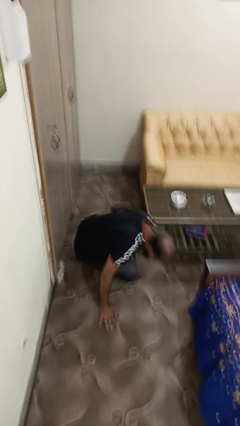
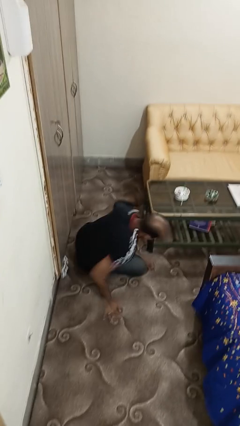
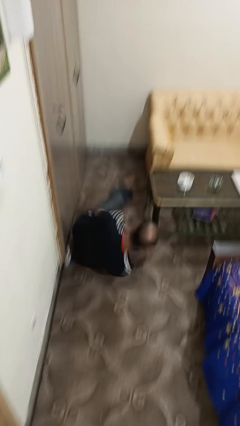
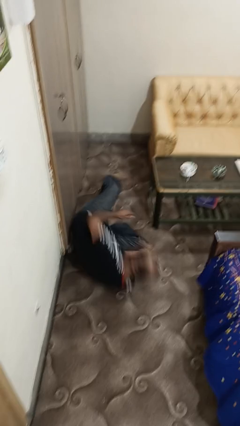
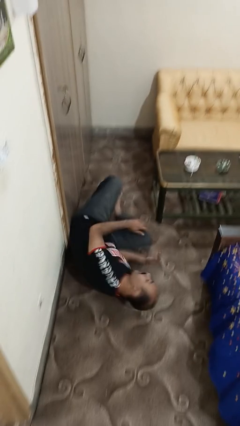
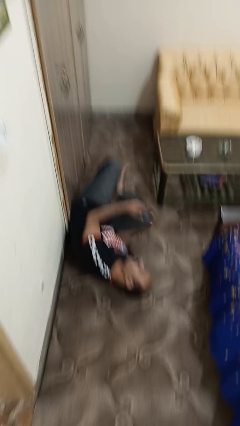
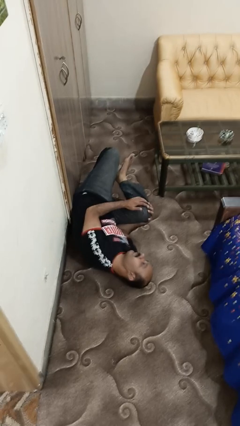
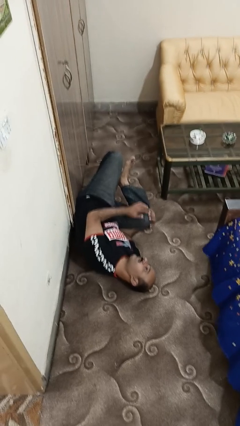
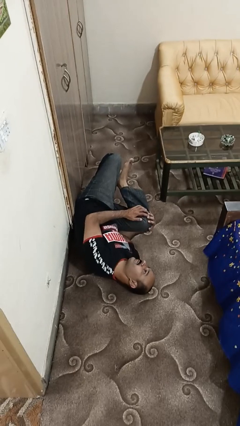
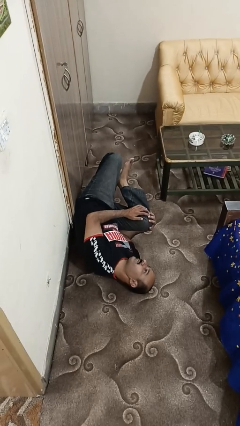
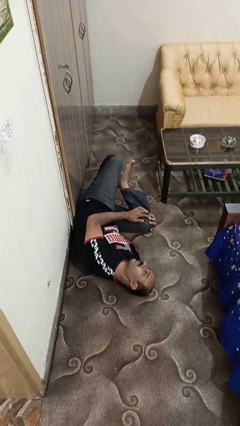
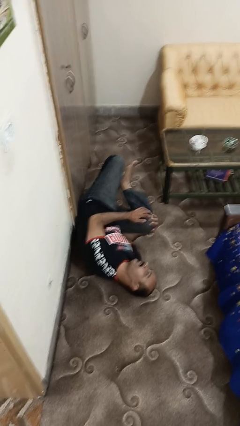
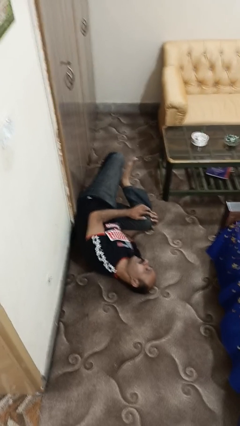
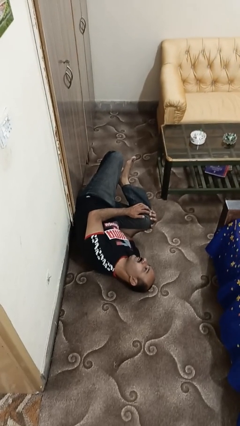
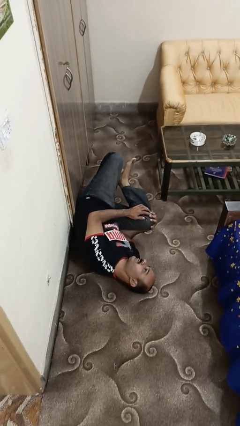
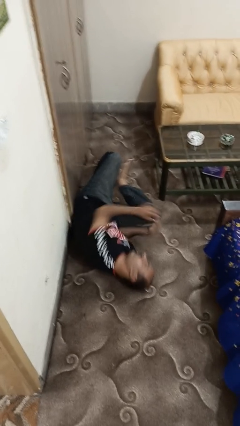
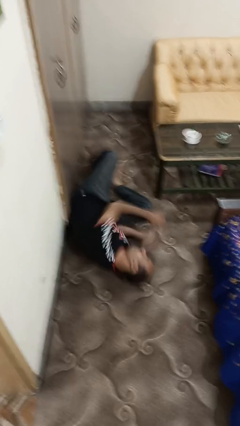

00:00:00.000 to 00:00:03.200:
person lies down on floor

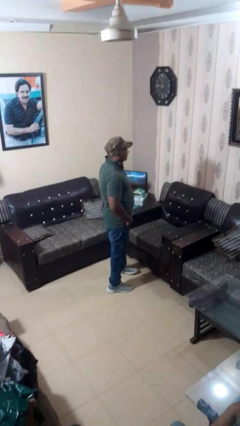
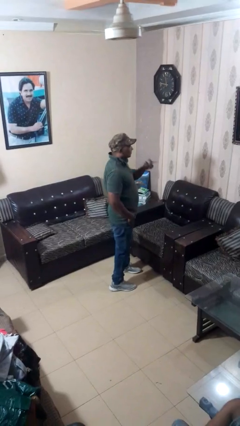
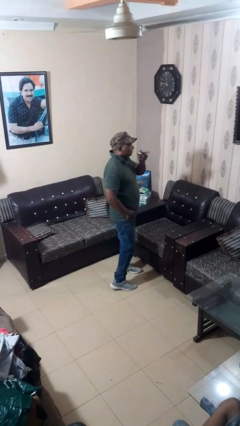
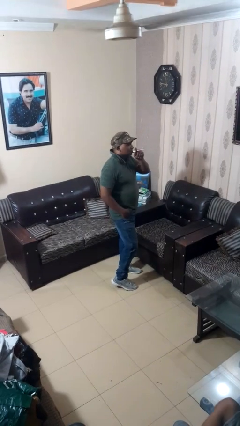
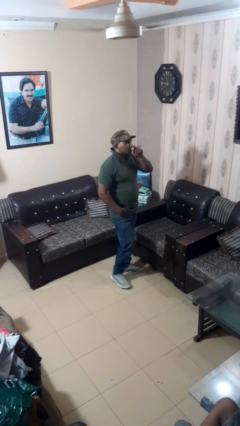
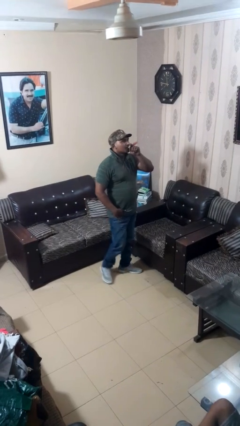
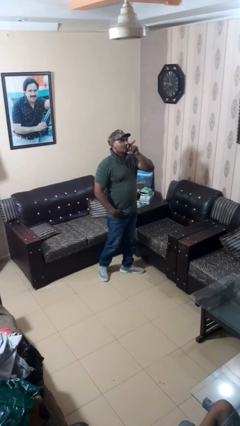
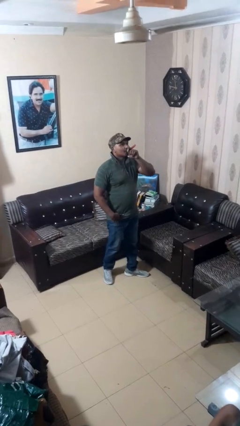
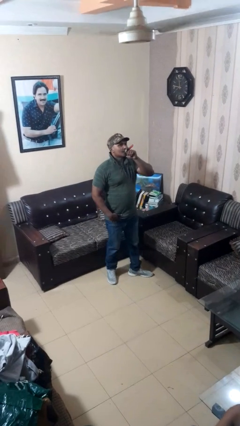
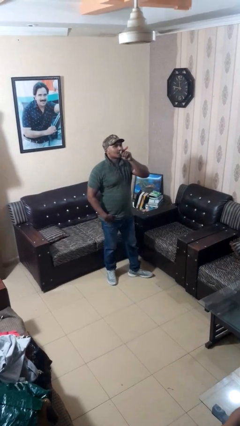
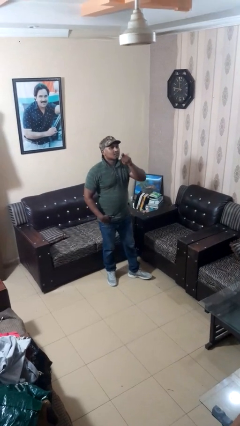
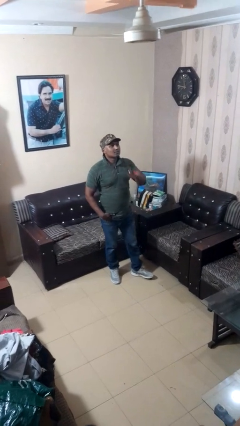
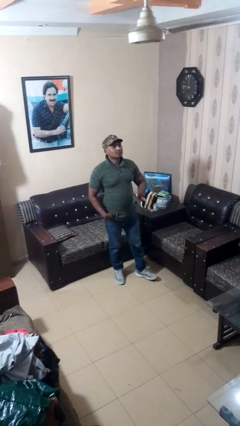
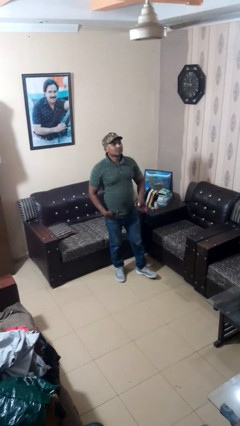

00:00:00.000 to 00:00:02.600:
person vapes

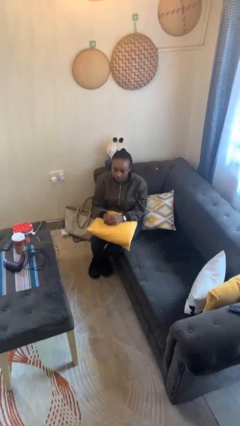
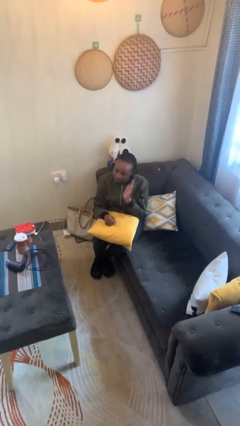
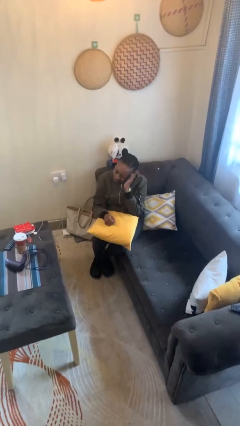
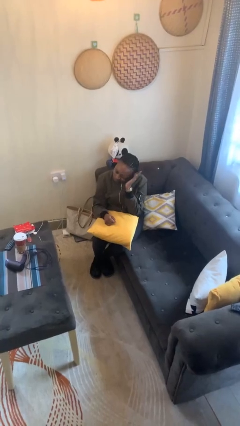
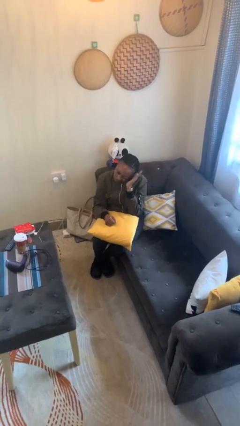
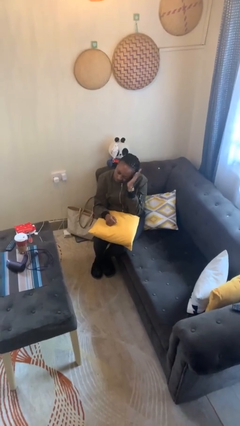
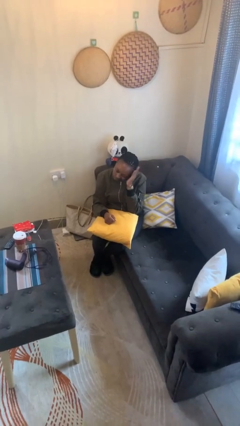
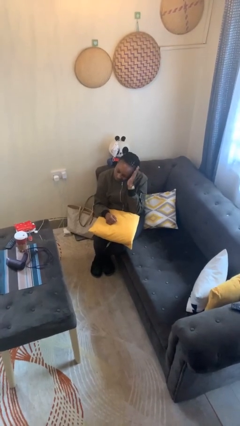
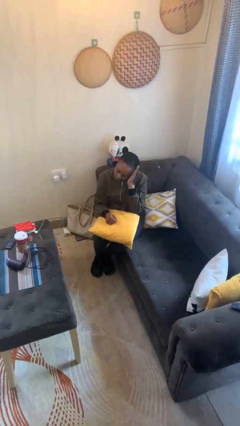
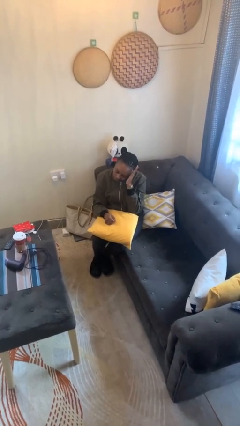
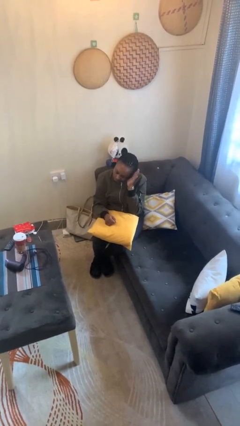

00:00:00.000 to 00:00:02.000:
person pats head

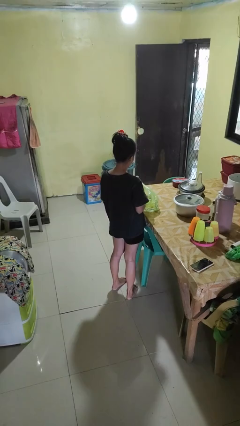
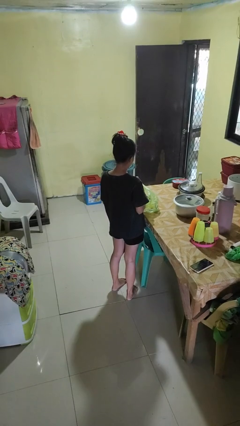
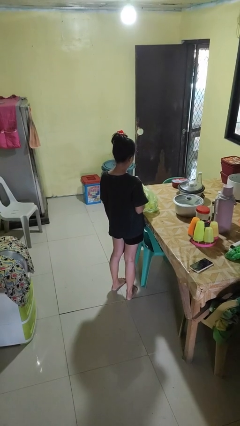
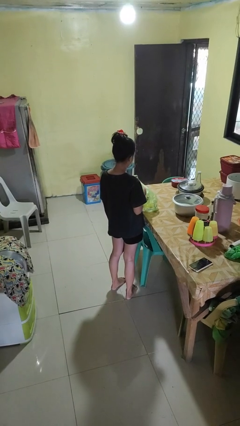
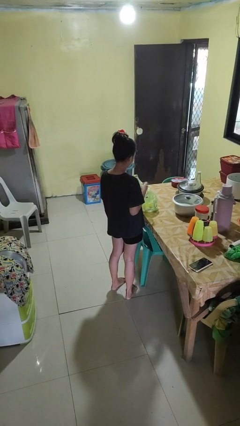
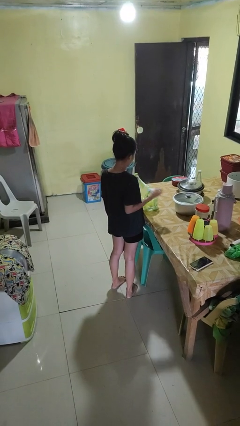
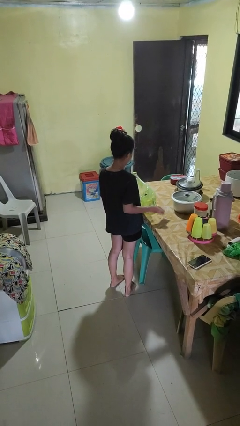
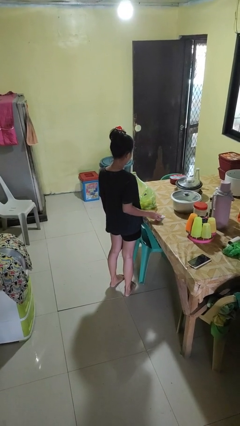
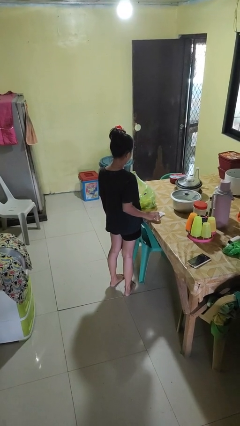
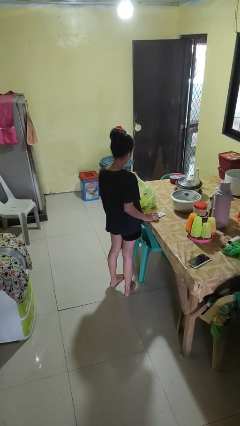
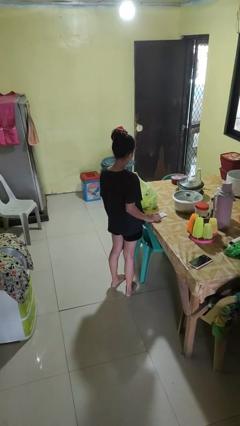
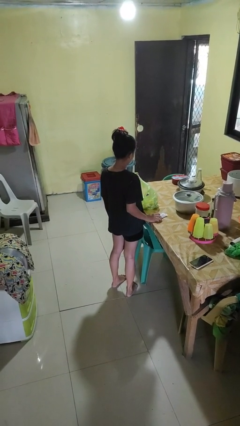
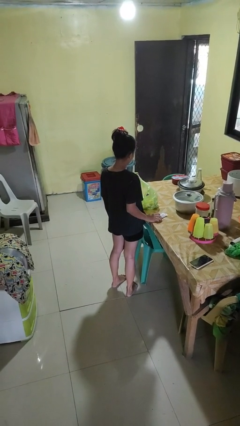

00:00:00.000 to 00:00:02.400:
person takes object from bag

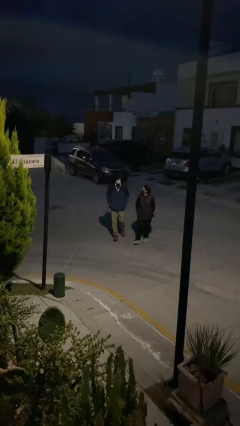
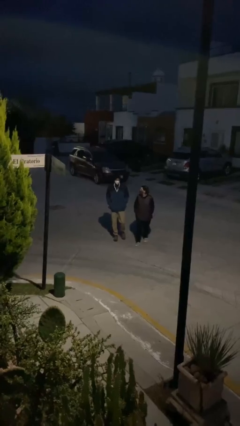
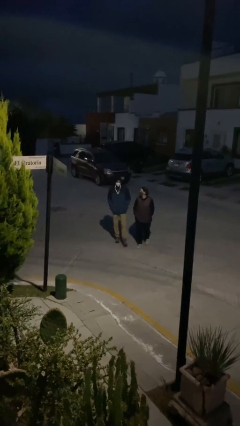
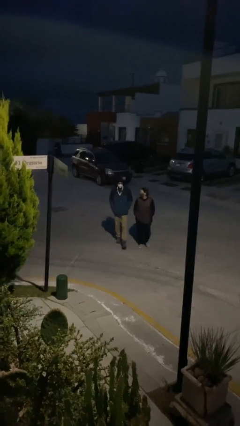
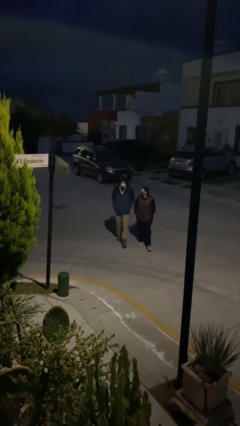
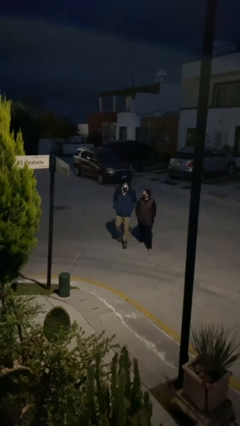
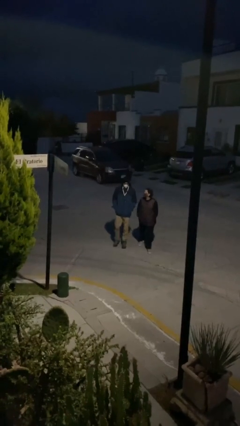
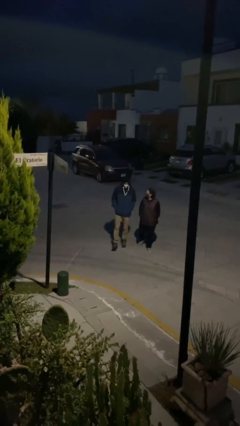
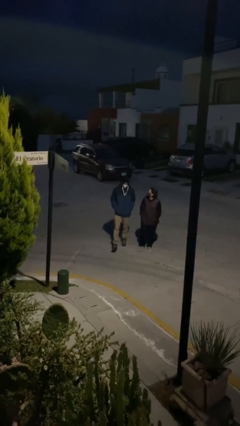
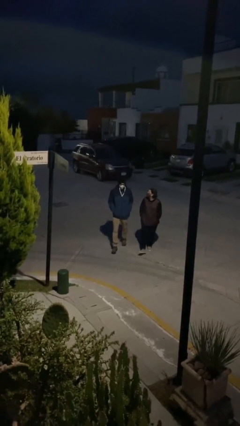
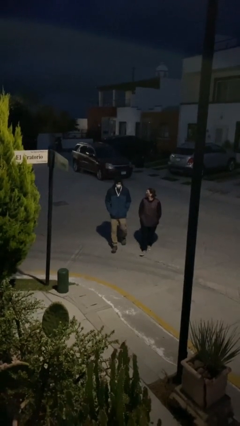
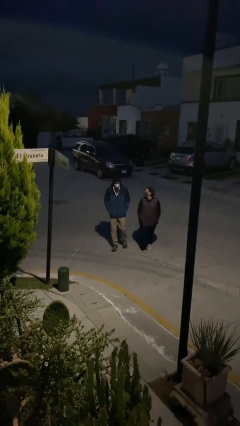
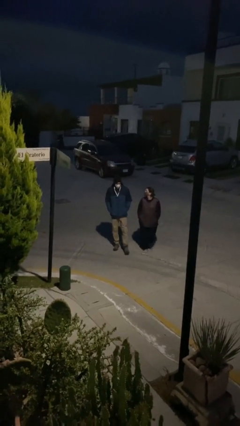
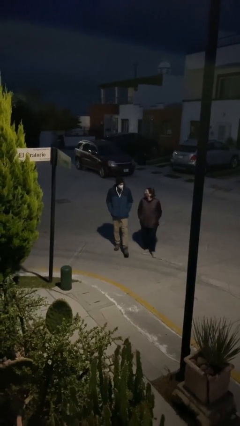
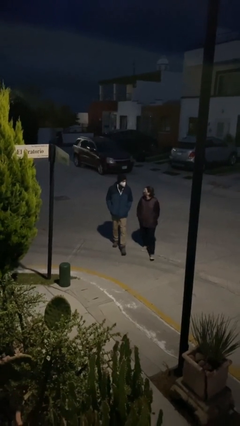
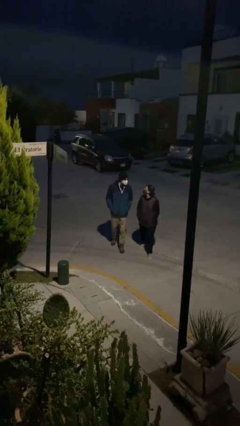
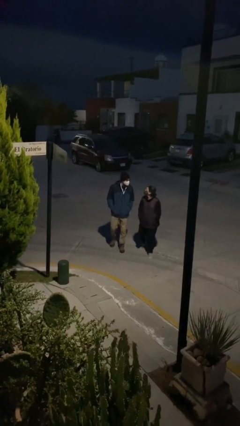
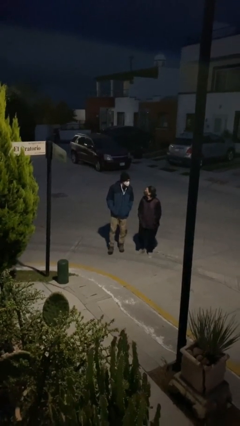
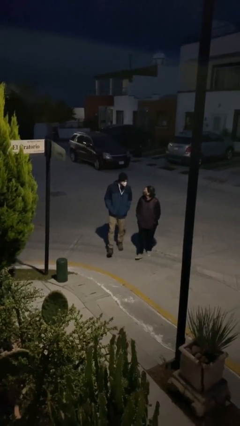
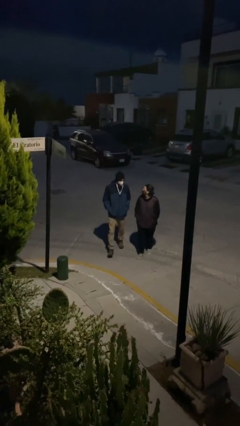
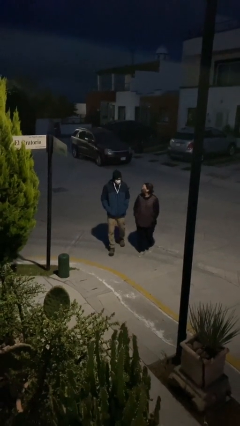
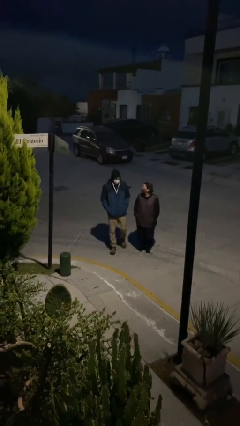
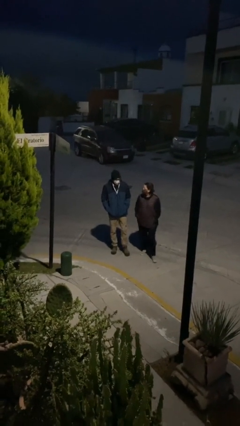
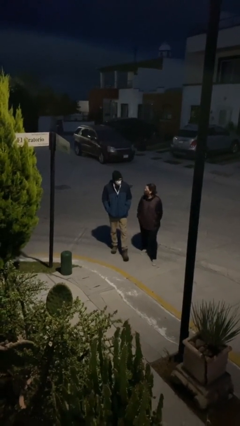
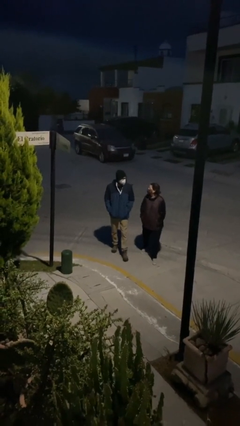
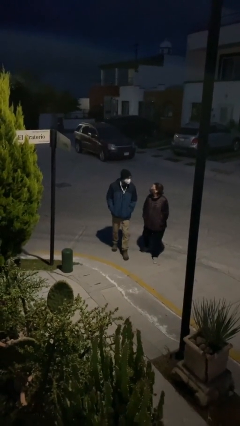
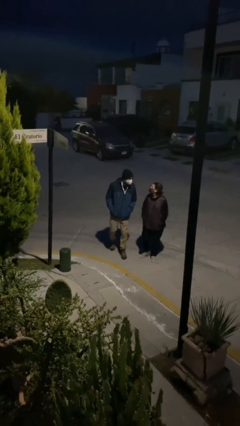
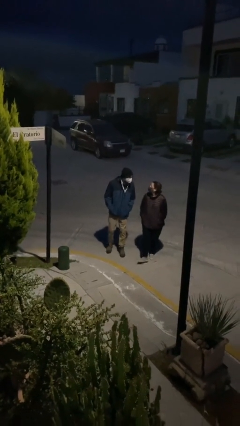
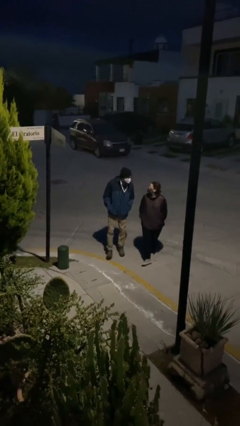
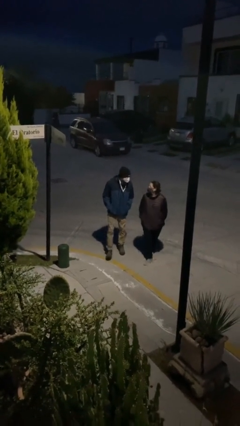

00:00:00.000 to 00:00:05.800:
person talks to person

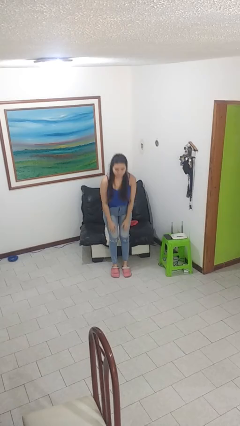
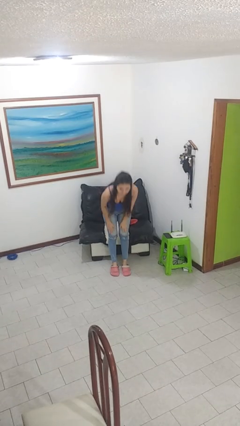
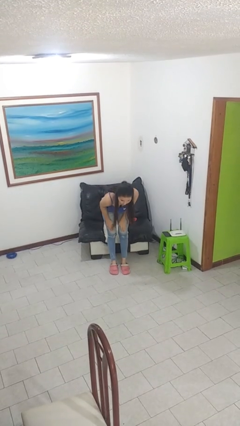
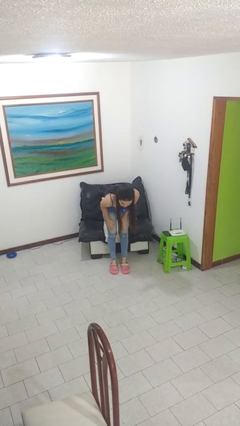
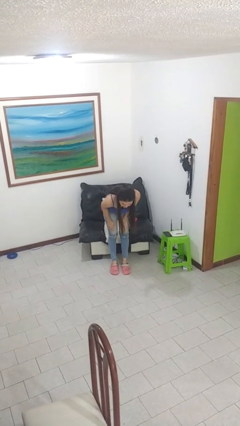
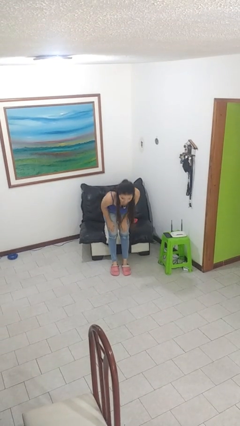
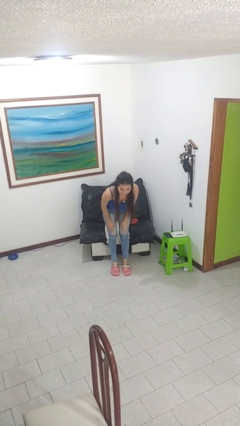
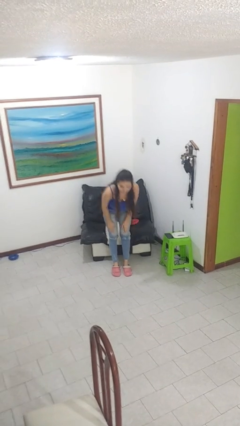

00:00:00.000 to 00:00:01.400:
person bows

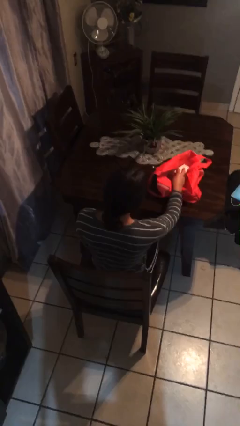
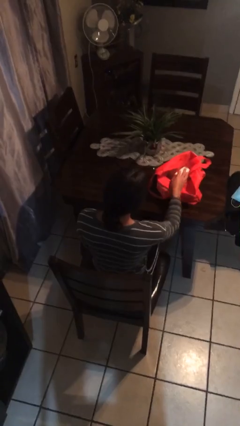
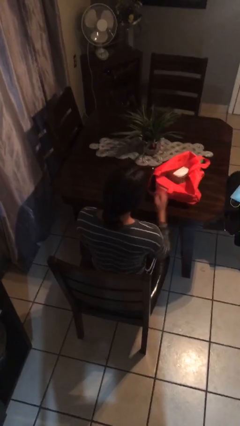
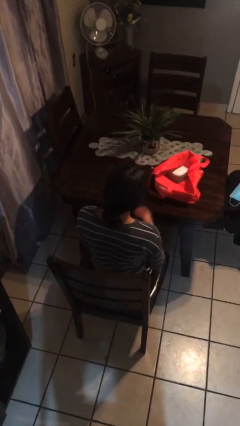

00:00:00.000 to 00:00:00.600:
person puts object into bag
